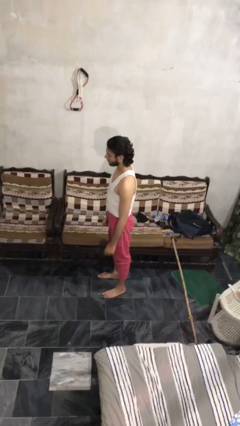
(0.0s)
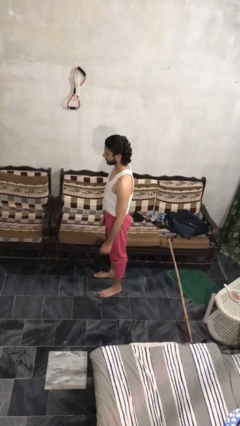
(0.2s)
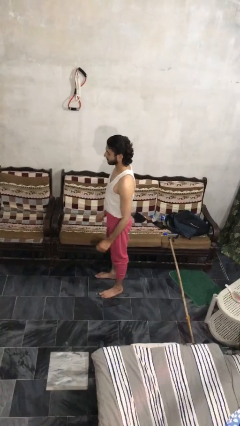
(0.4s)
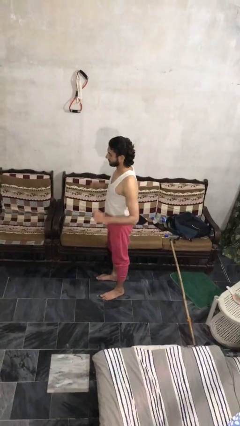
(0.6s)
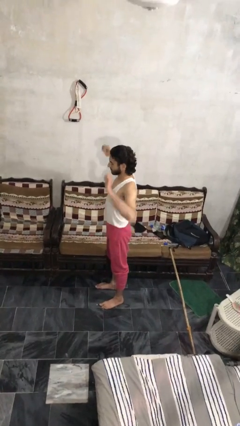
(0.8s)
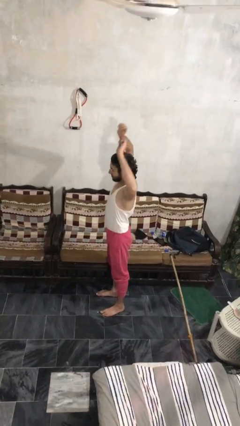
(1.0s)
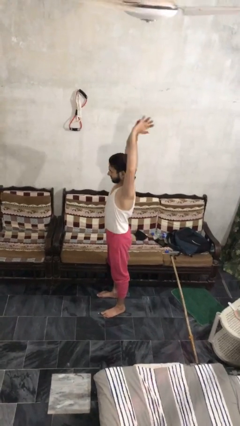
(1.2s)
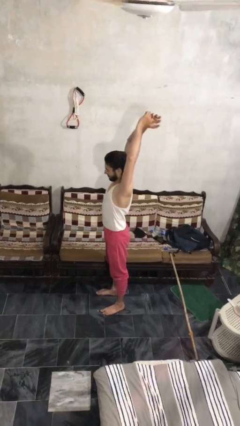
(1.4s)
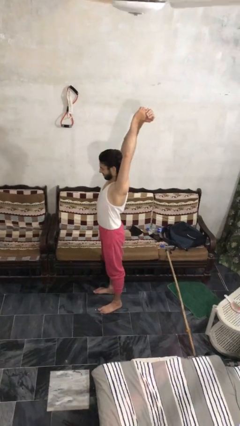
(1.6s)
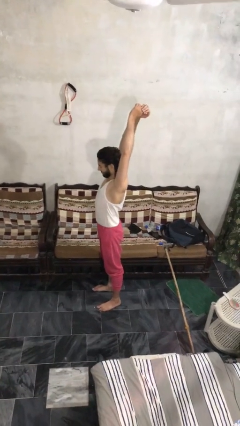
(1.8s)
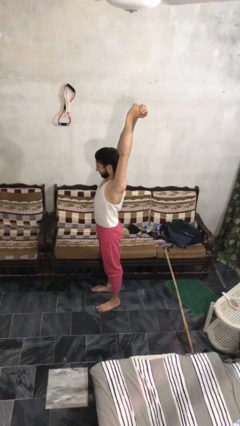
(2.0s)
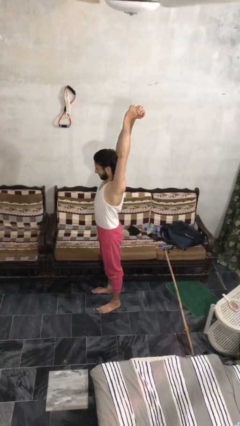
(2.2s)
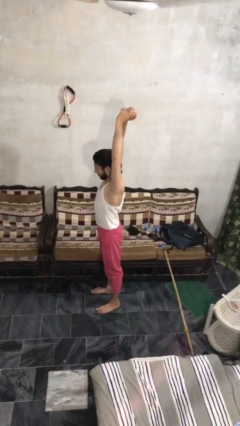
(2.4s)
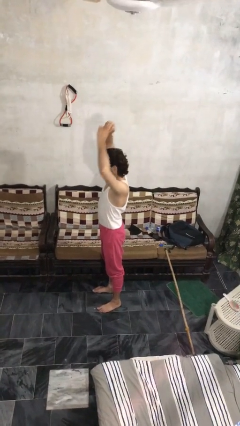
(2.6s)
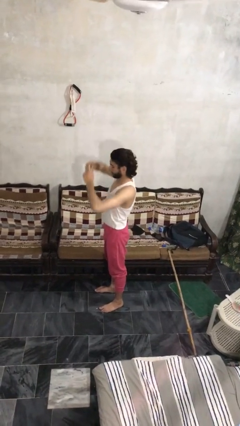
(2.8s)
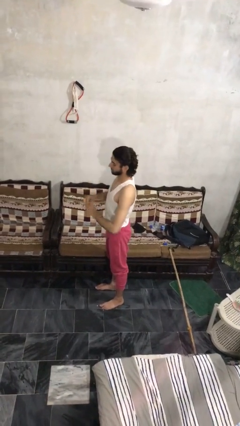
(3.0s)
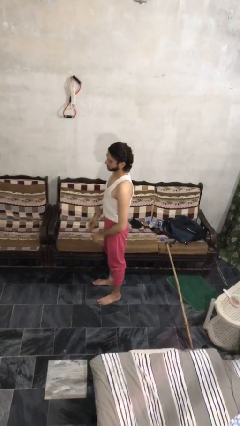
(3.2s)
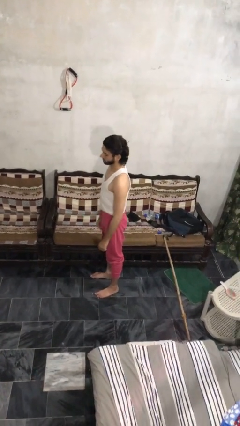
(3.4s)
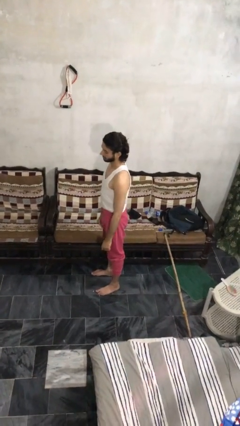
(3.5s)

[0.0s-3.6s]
person stretches arms over head

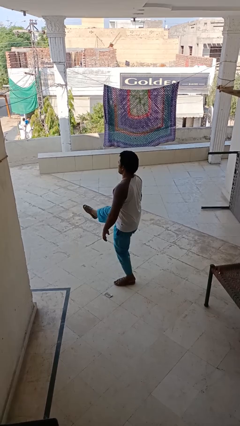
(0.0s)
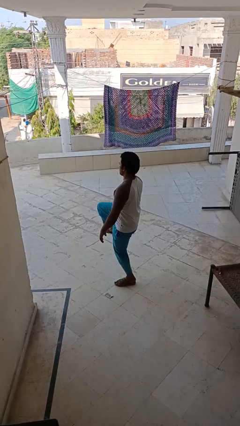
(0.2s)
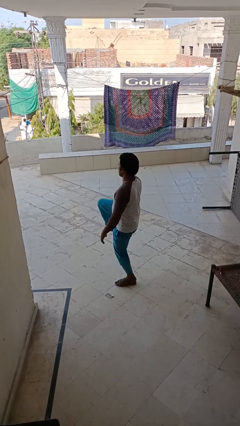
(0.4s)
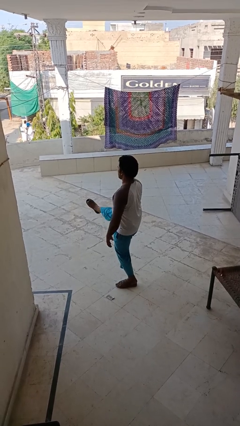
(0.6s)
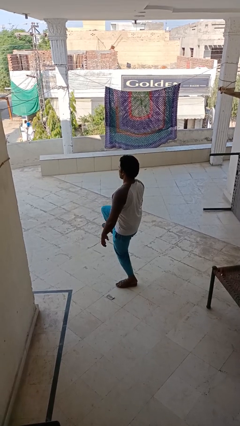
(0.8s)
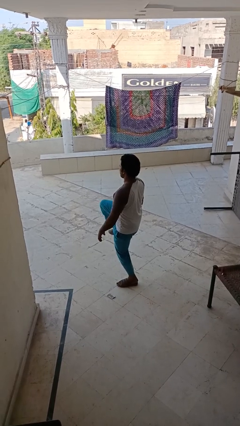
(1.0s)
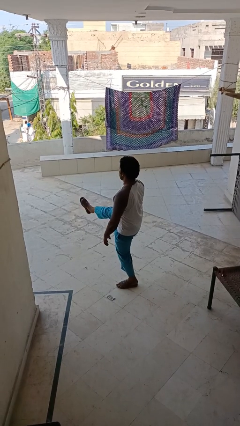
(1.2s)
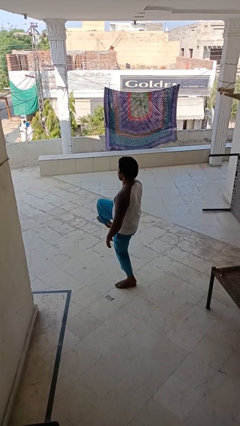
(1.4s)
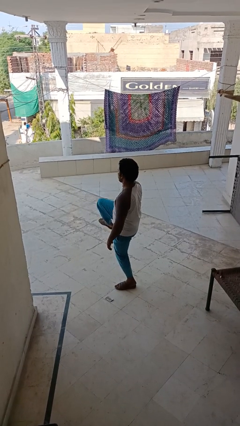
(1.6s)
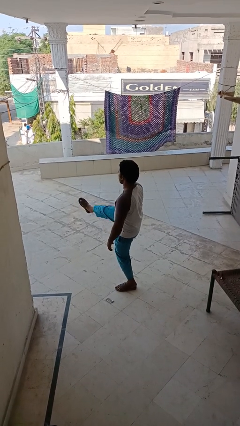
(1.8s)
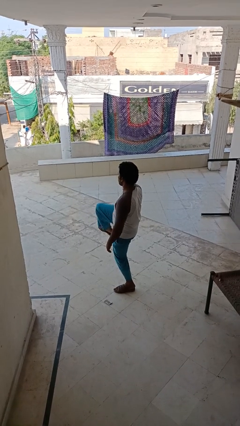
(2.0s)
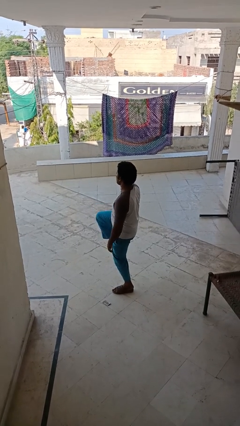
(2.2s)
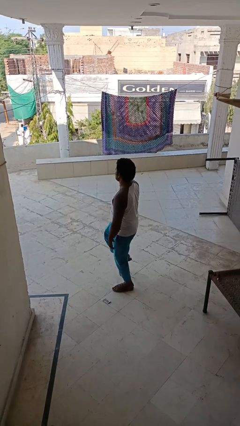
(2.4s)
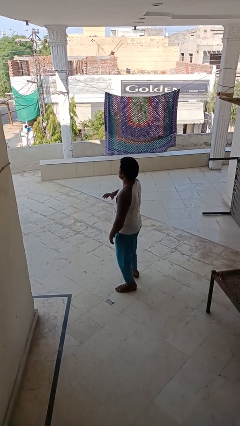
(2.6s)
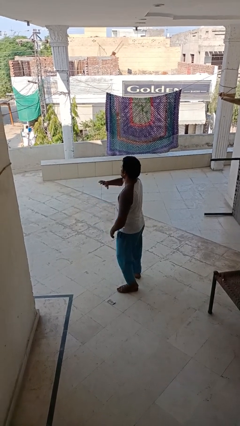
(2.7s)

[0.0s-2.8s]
person karate kicks

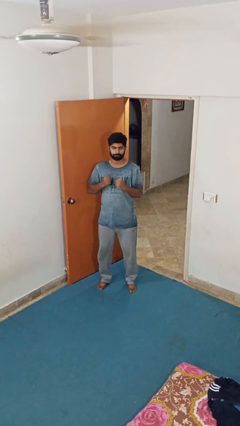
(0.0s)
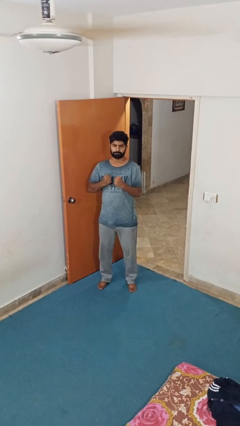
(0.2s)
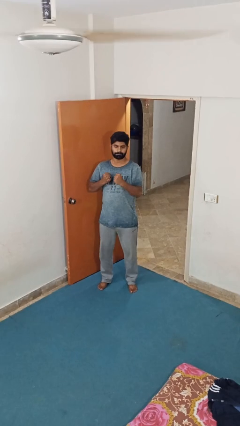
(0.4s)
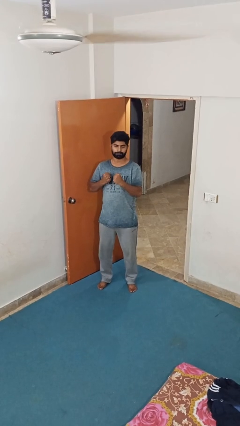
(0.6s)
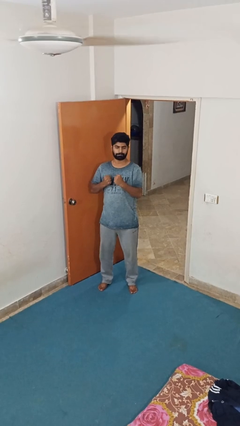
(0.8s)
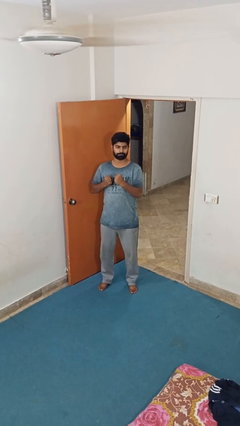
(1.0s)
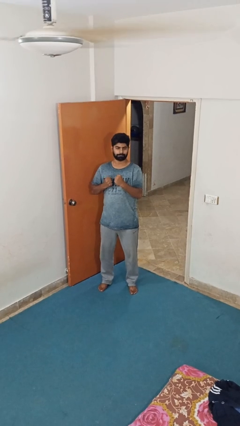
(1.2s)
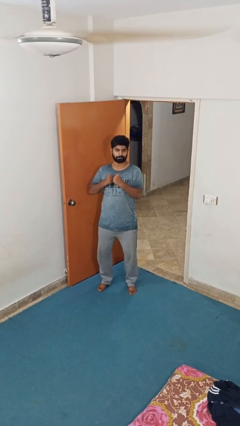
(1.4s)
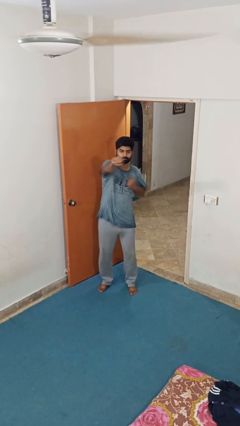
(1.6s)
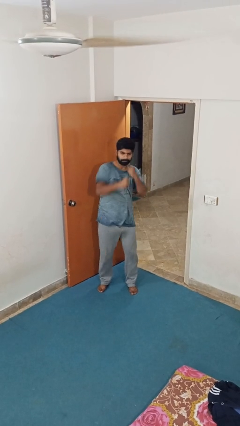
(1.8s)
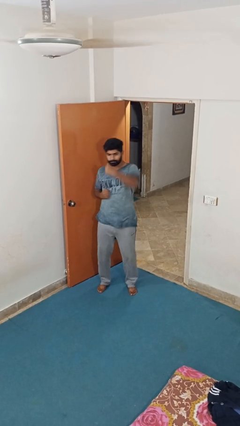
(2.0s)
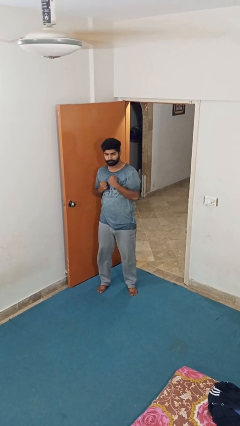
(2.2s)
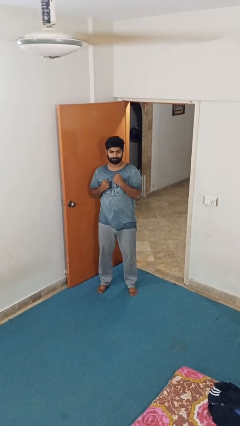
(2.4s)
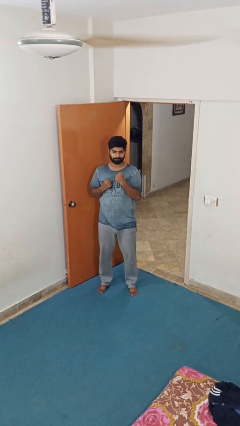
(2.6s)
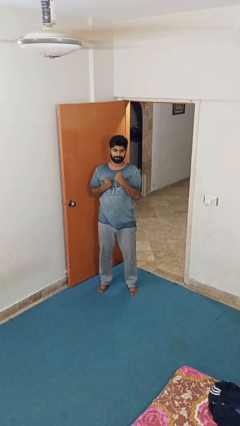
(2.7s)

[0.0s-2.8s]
person punches

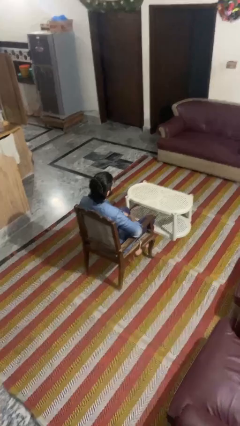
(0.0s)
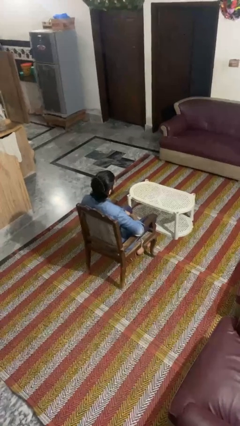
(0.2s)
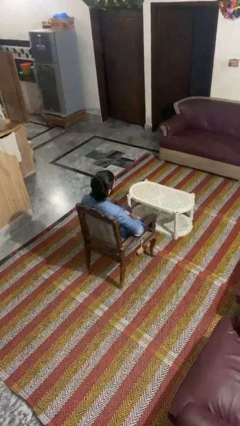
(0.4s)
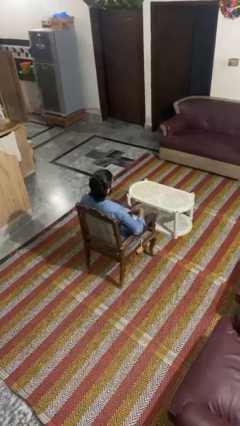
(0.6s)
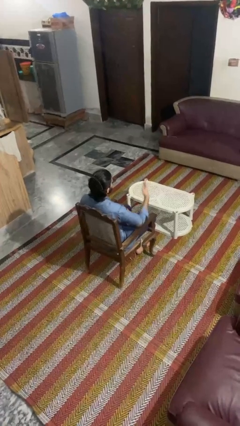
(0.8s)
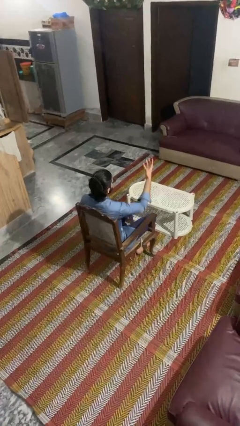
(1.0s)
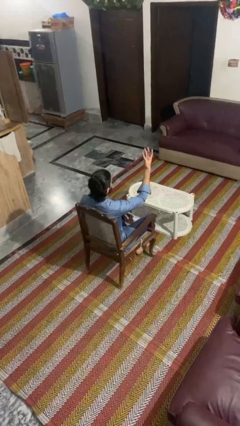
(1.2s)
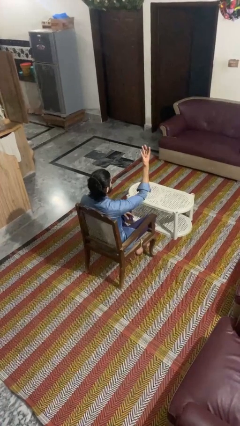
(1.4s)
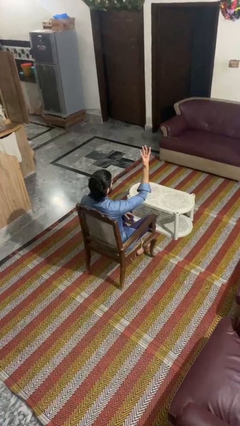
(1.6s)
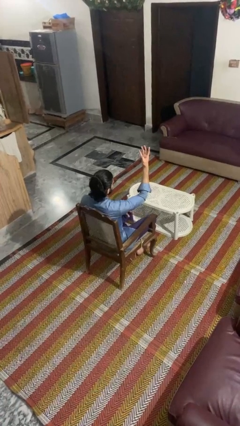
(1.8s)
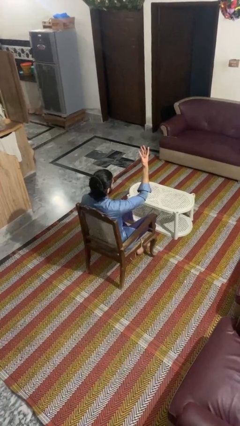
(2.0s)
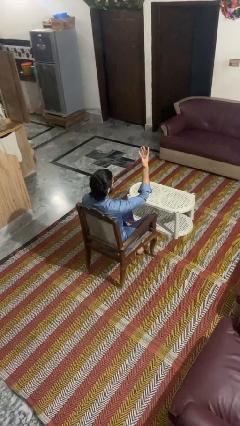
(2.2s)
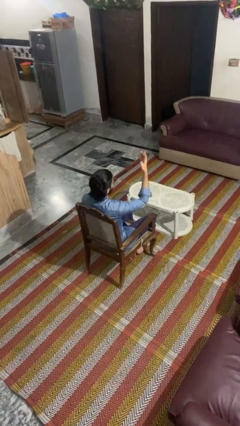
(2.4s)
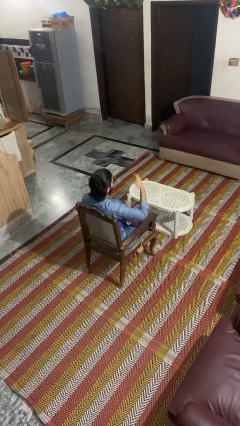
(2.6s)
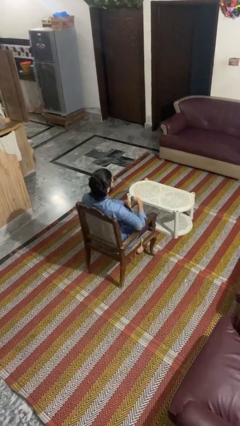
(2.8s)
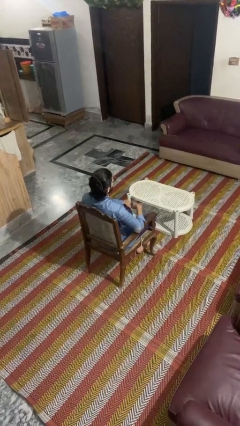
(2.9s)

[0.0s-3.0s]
person gestures number four

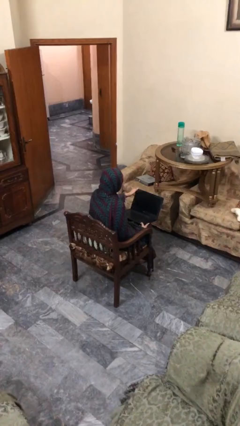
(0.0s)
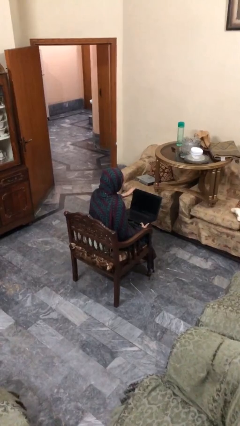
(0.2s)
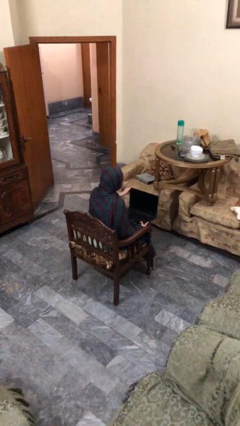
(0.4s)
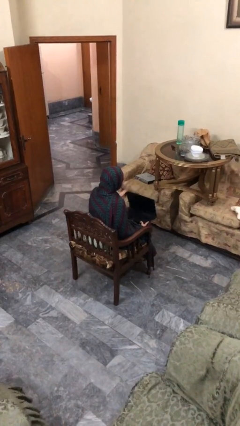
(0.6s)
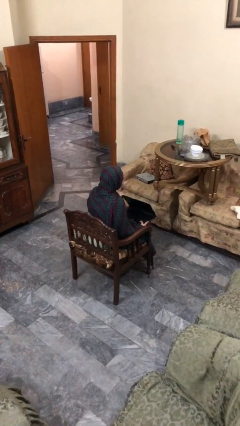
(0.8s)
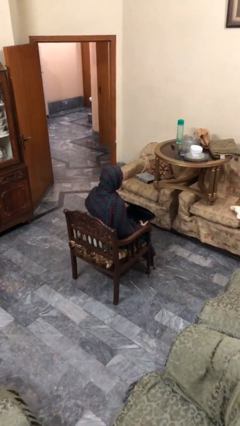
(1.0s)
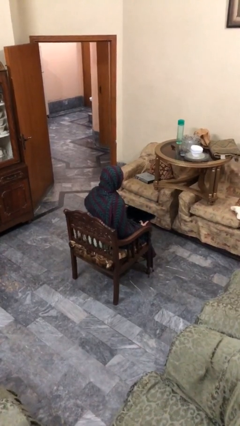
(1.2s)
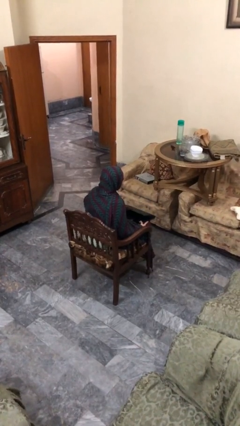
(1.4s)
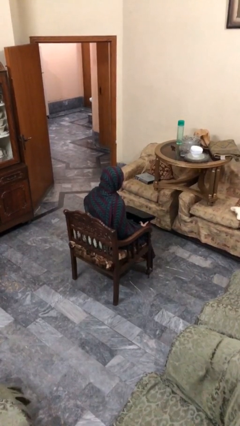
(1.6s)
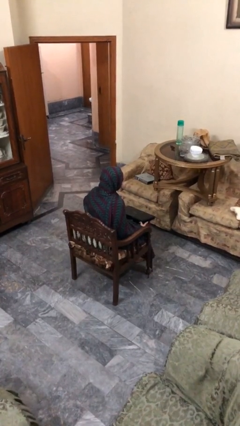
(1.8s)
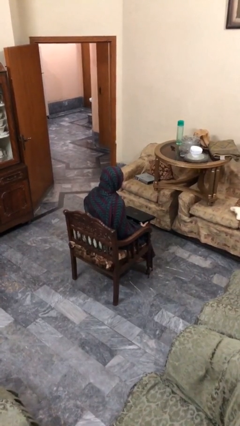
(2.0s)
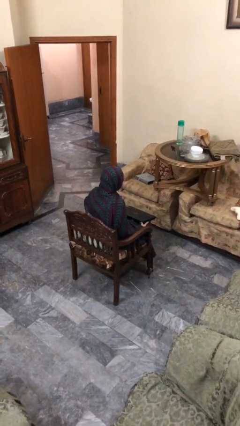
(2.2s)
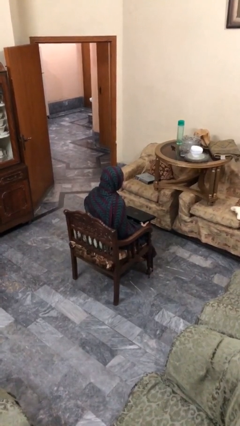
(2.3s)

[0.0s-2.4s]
person closes laptop

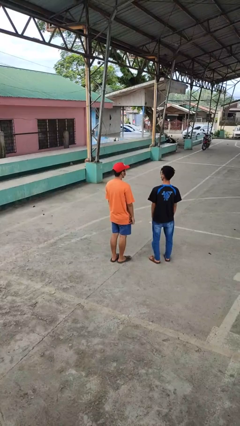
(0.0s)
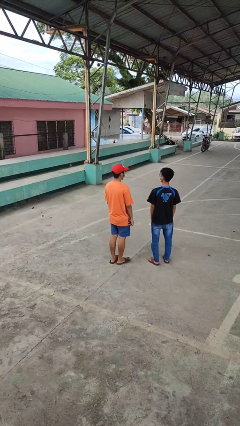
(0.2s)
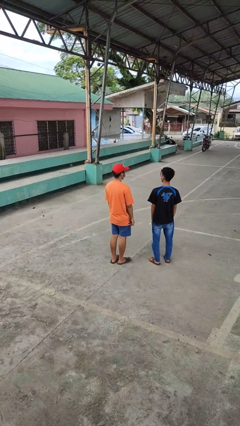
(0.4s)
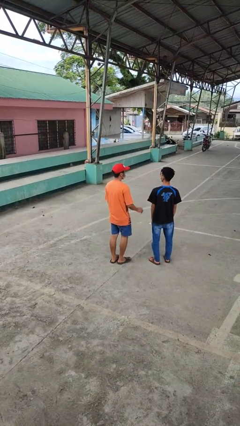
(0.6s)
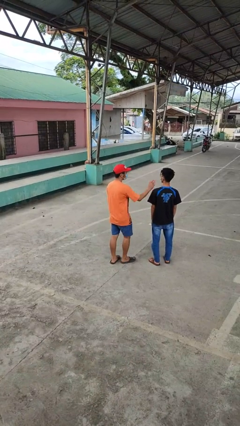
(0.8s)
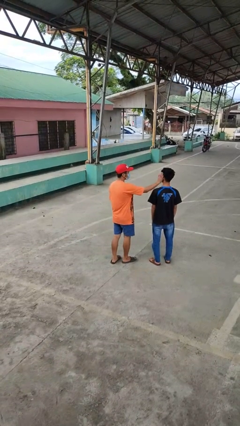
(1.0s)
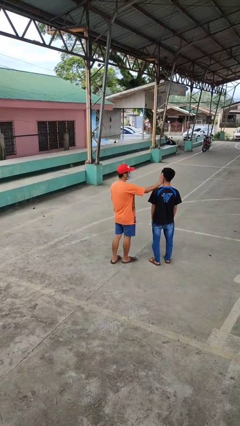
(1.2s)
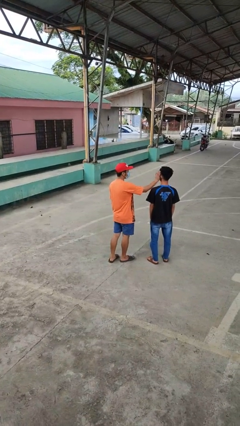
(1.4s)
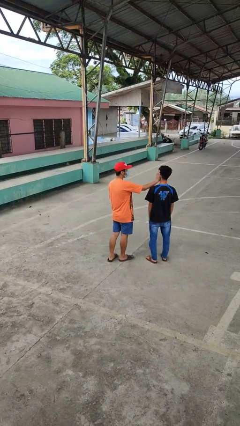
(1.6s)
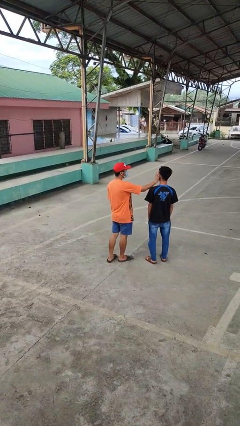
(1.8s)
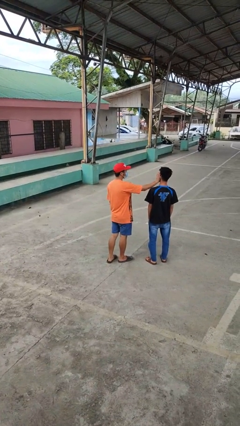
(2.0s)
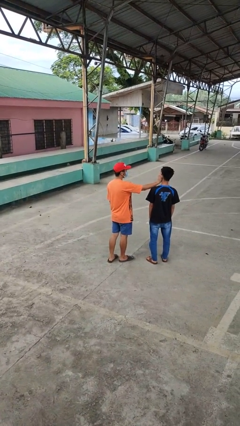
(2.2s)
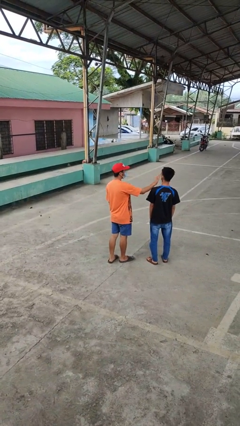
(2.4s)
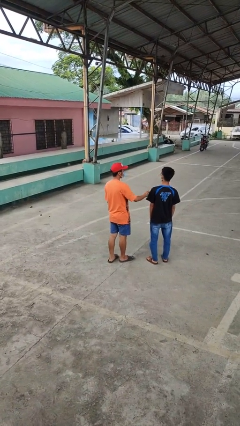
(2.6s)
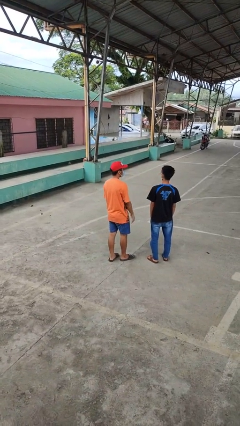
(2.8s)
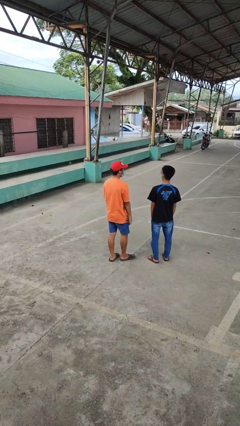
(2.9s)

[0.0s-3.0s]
person touches face of person
